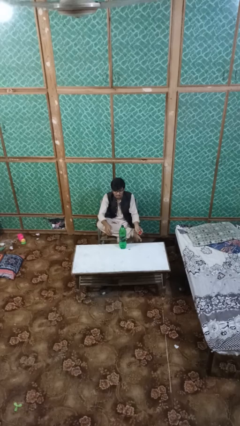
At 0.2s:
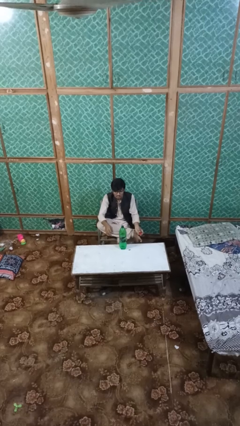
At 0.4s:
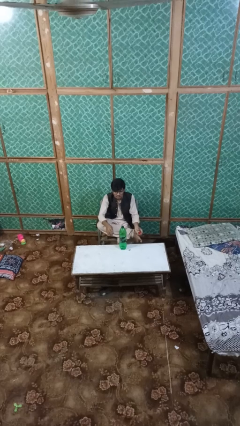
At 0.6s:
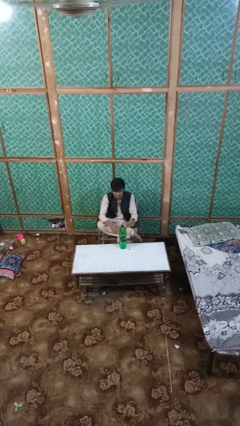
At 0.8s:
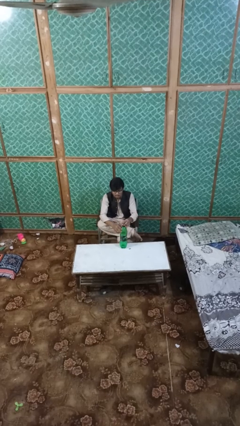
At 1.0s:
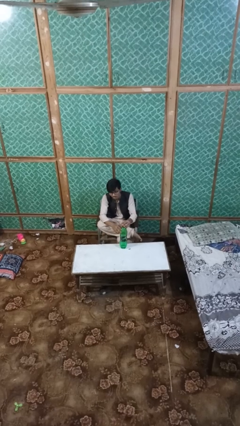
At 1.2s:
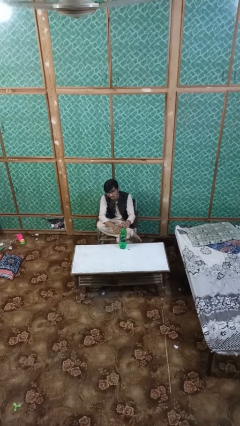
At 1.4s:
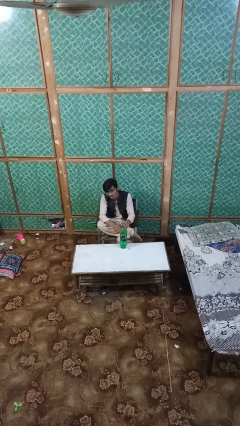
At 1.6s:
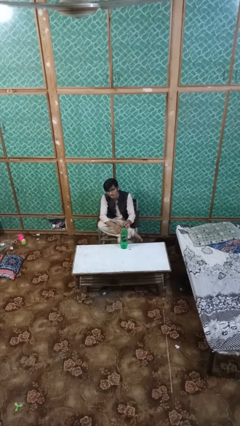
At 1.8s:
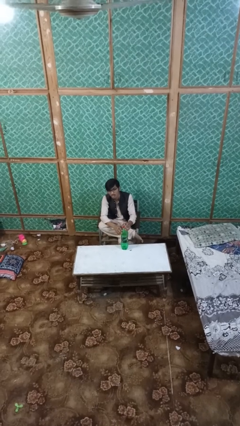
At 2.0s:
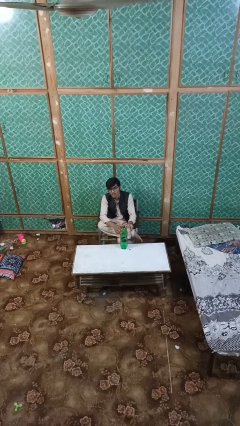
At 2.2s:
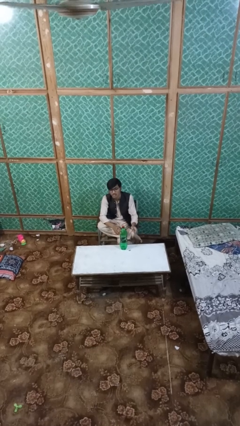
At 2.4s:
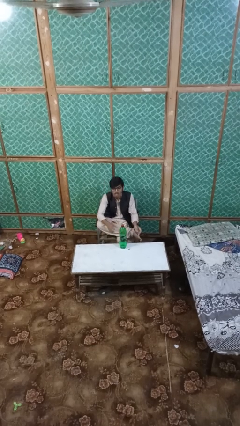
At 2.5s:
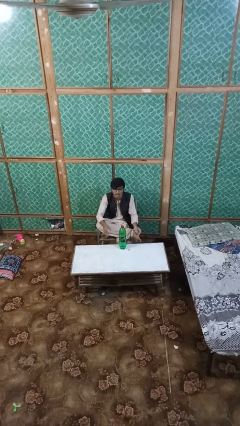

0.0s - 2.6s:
person screws lid to bottle

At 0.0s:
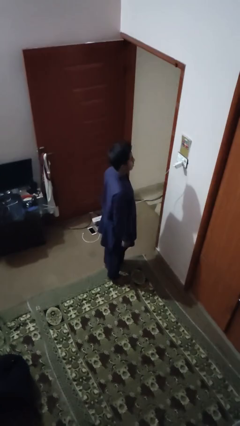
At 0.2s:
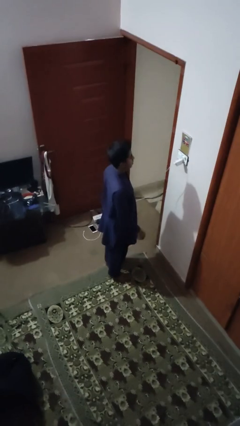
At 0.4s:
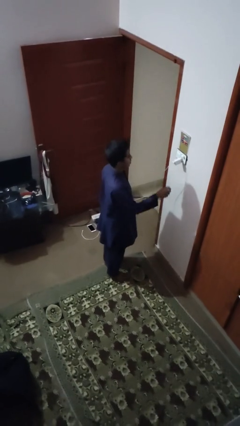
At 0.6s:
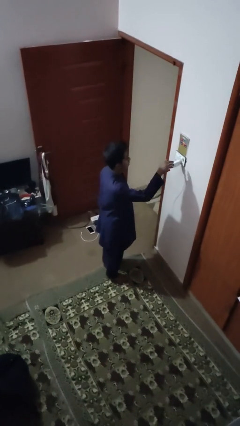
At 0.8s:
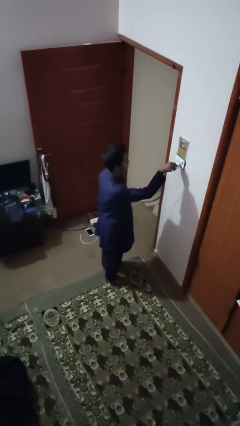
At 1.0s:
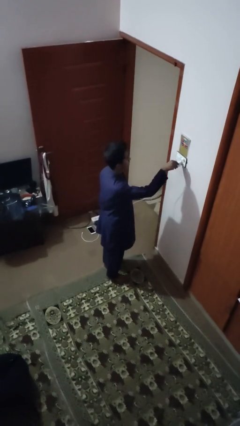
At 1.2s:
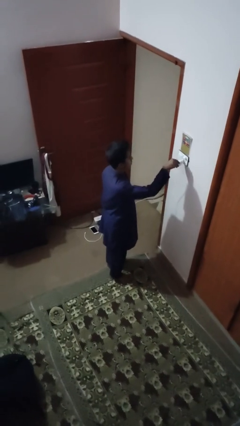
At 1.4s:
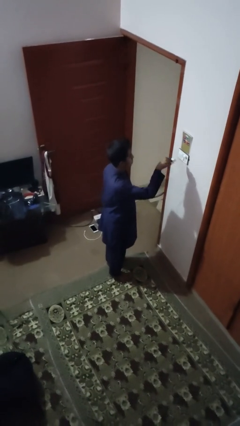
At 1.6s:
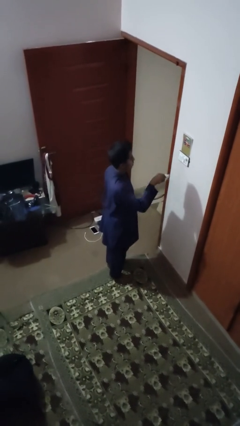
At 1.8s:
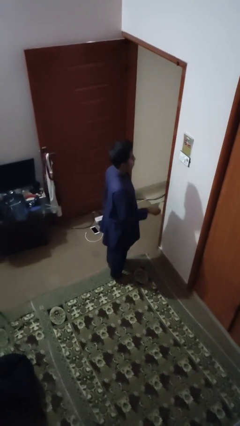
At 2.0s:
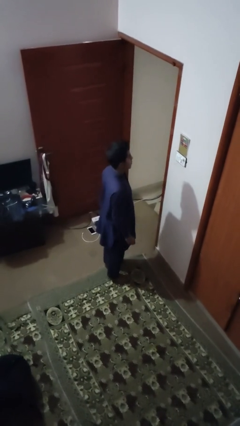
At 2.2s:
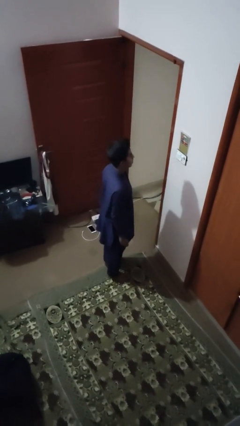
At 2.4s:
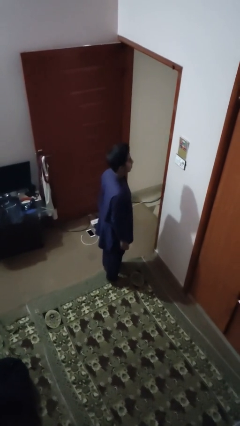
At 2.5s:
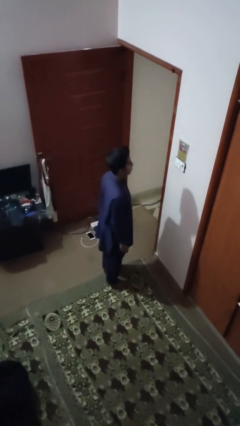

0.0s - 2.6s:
person unplugs from electrical socket

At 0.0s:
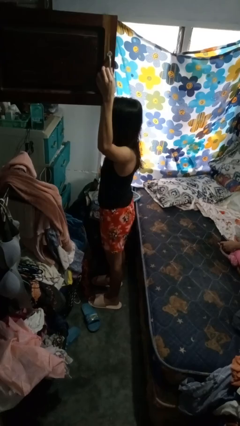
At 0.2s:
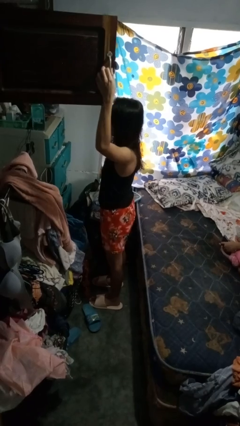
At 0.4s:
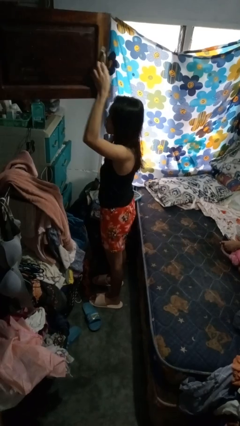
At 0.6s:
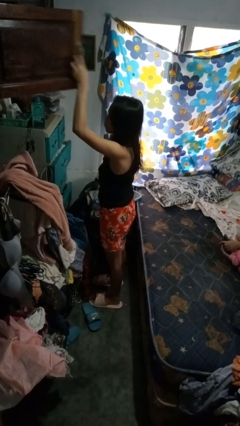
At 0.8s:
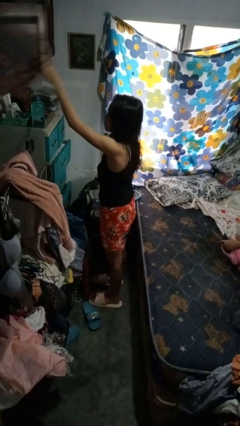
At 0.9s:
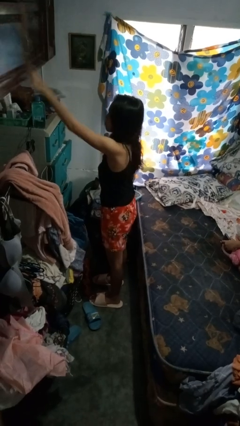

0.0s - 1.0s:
person closes closet door

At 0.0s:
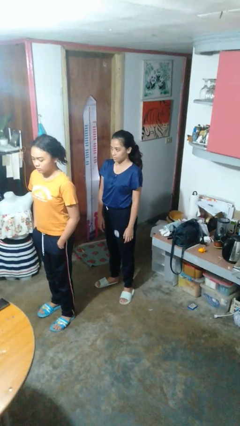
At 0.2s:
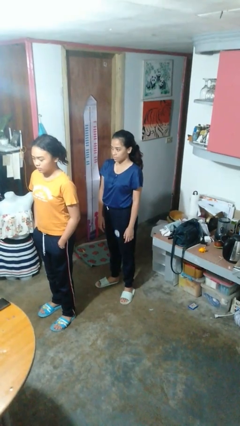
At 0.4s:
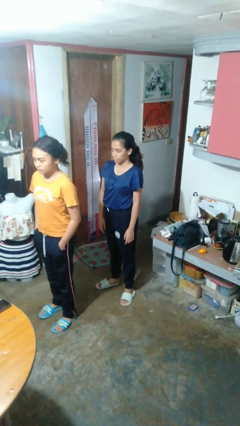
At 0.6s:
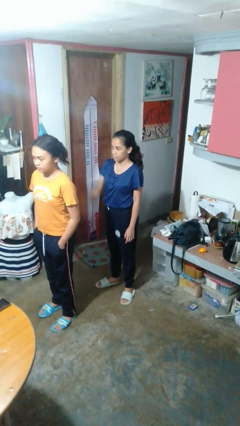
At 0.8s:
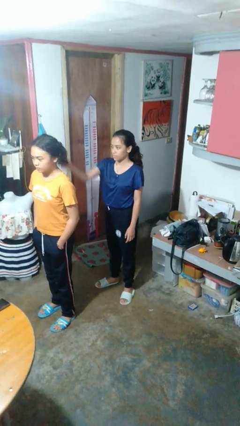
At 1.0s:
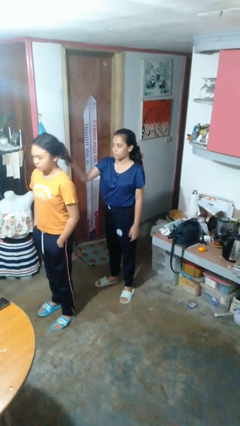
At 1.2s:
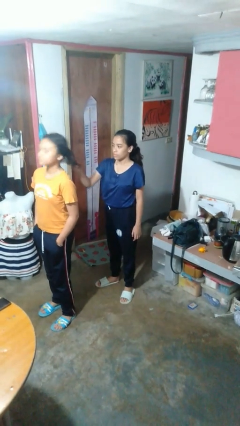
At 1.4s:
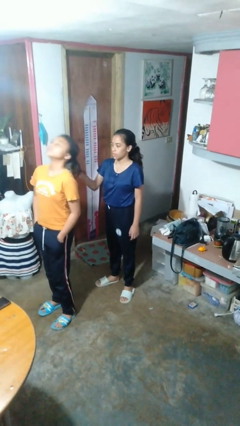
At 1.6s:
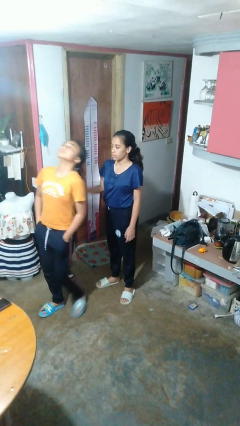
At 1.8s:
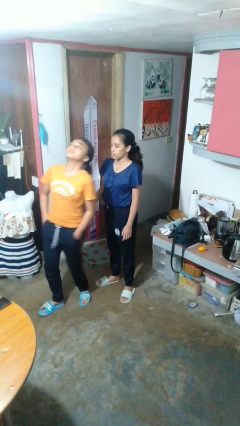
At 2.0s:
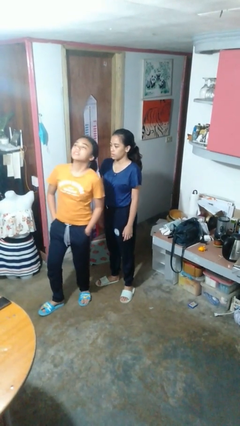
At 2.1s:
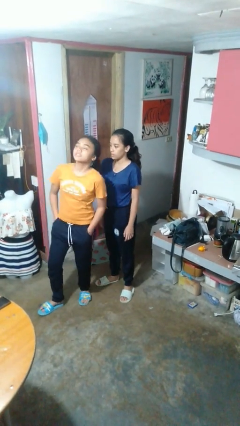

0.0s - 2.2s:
person grabs person by hair

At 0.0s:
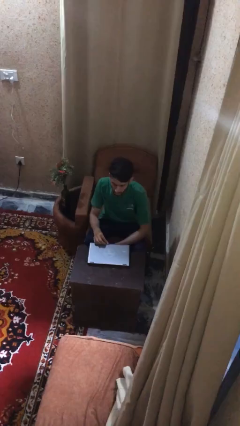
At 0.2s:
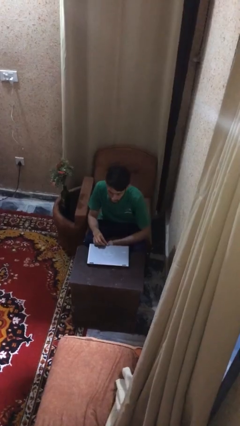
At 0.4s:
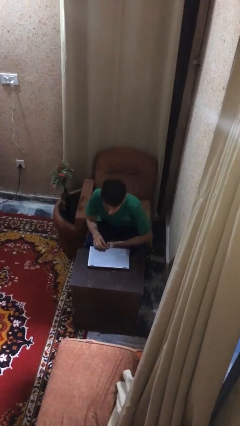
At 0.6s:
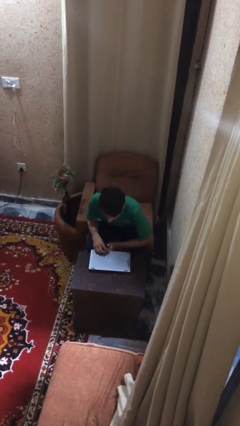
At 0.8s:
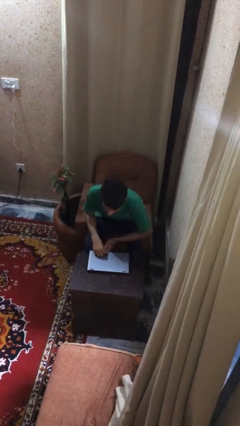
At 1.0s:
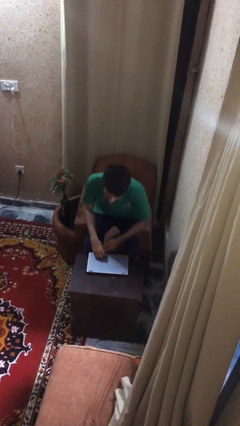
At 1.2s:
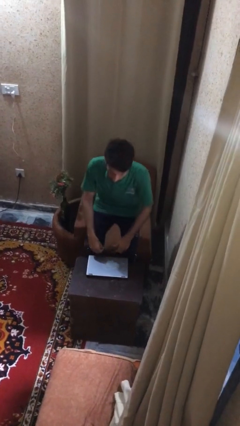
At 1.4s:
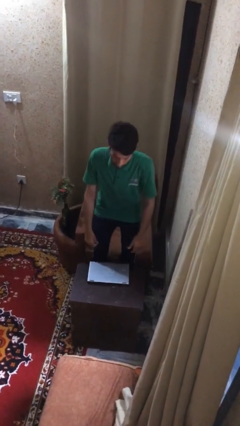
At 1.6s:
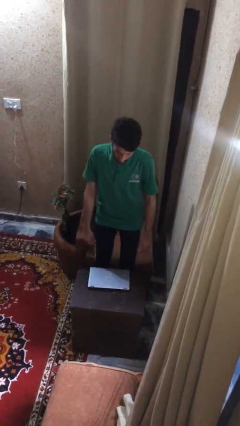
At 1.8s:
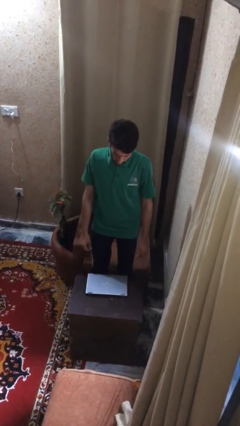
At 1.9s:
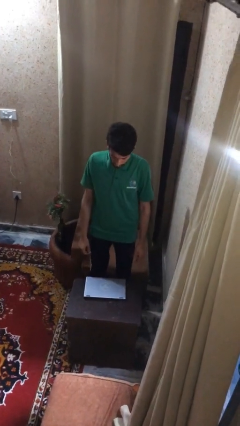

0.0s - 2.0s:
person stands up

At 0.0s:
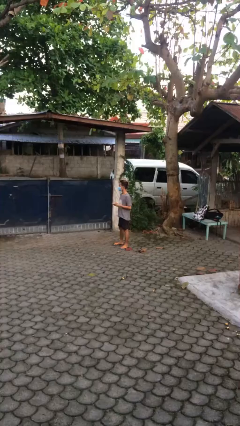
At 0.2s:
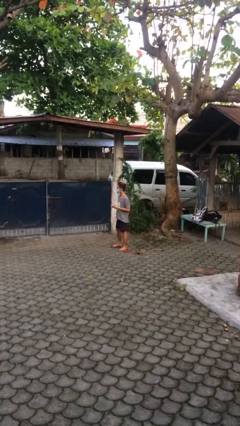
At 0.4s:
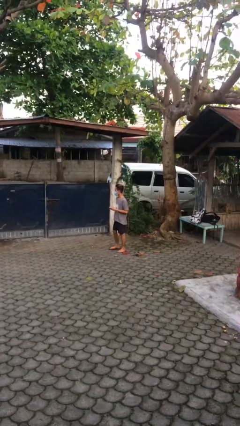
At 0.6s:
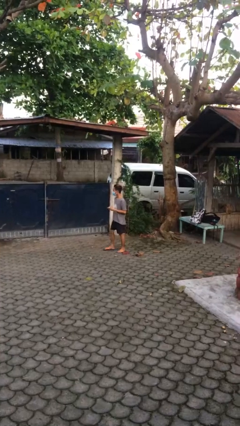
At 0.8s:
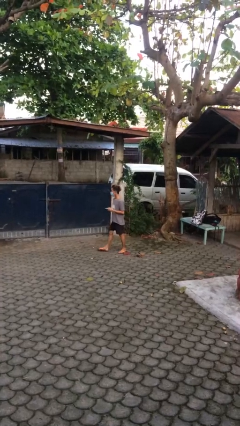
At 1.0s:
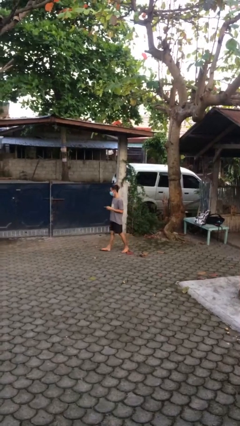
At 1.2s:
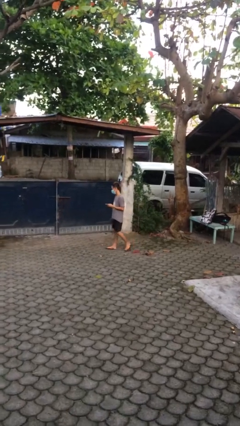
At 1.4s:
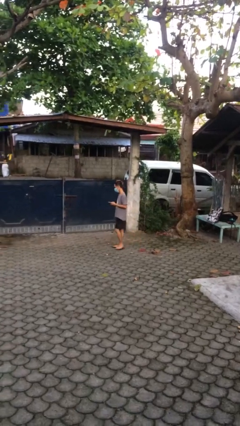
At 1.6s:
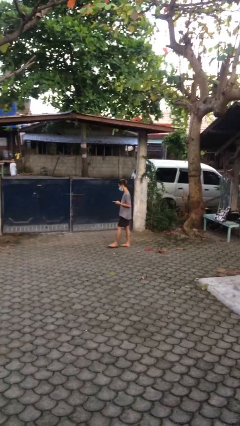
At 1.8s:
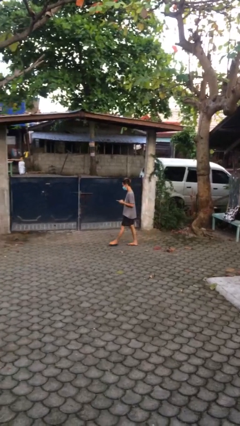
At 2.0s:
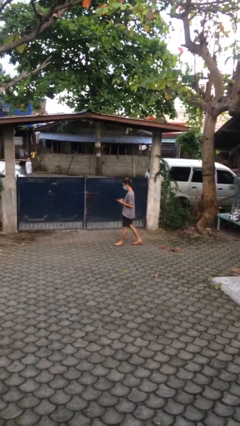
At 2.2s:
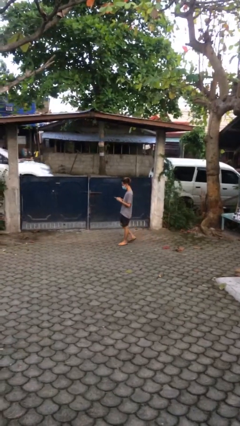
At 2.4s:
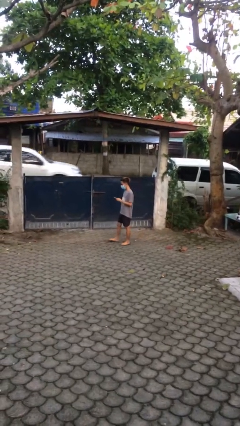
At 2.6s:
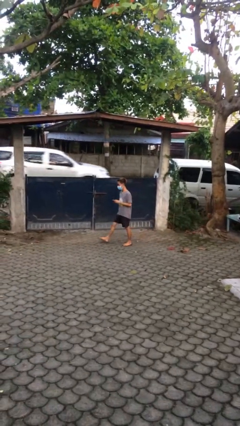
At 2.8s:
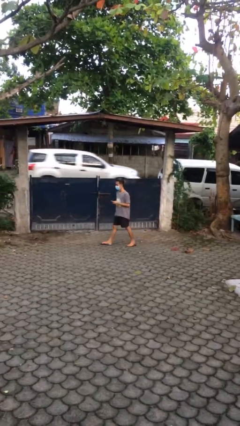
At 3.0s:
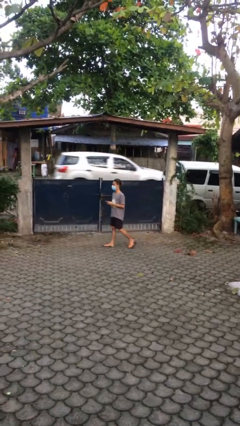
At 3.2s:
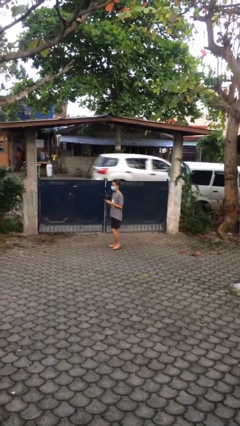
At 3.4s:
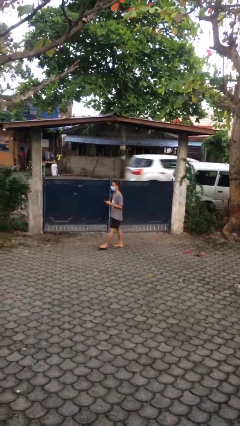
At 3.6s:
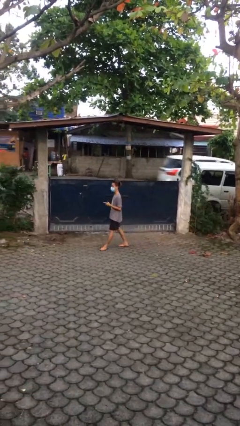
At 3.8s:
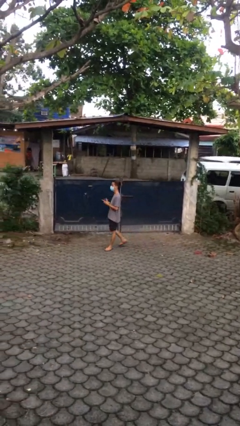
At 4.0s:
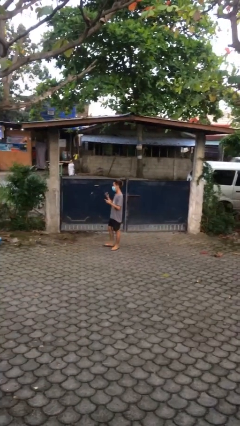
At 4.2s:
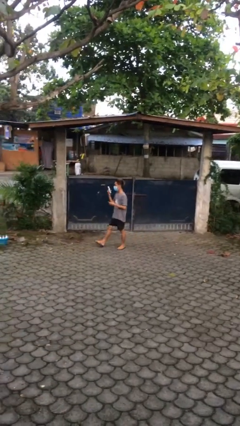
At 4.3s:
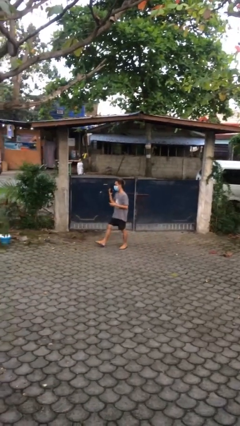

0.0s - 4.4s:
person texts on phone

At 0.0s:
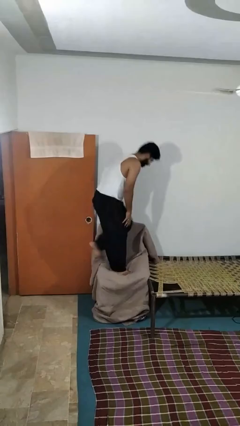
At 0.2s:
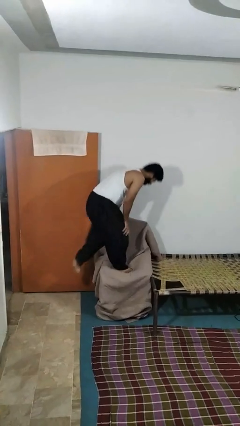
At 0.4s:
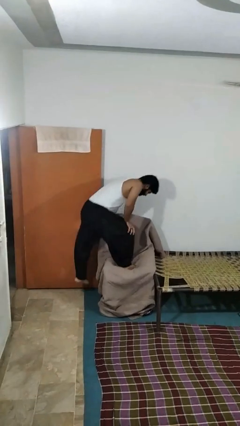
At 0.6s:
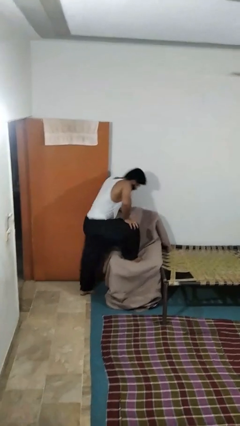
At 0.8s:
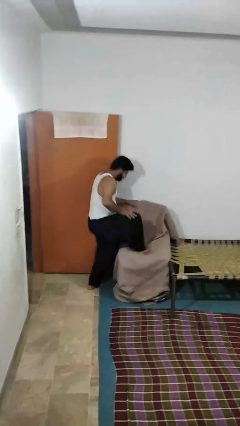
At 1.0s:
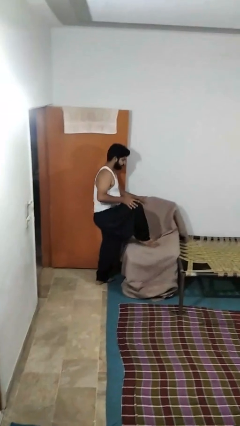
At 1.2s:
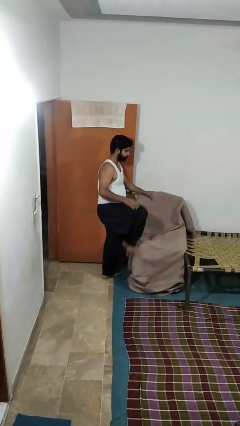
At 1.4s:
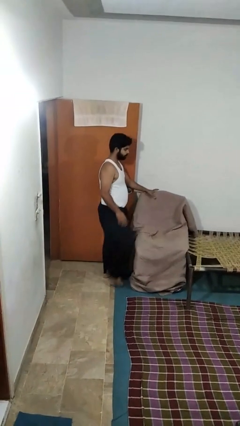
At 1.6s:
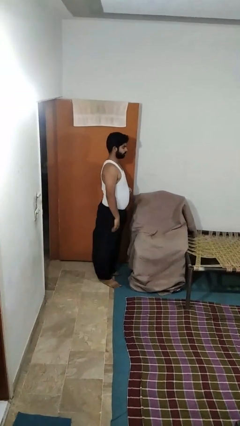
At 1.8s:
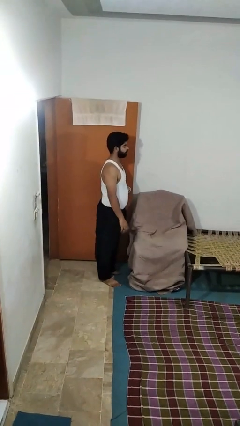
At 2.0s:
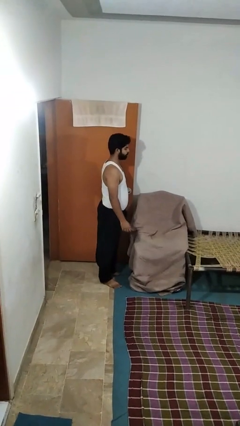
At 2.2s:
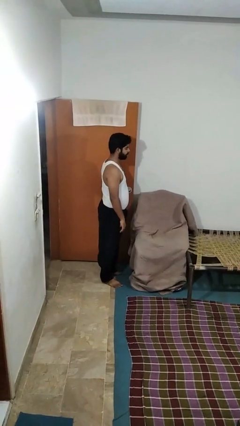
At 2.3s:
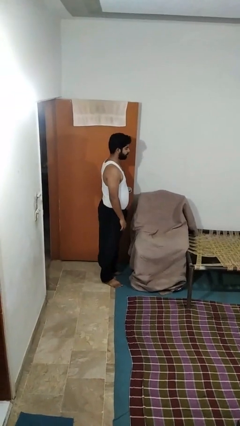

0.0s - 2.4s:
person climbs off couch
